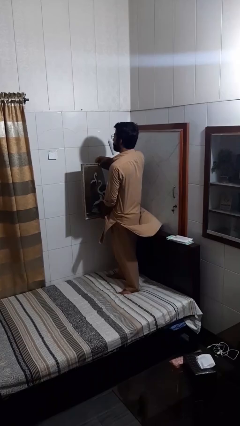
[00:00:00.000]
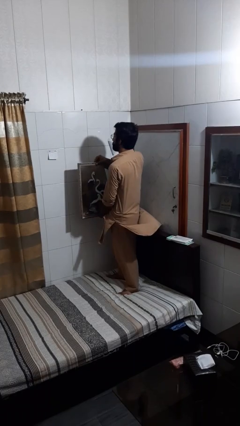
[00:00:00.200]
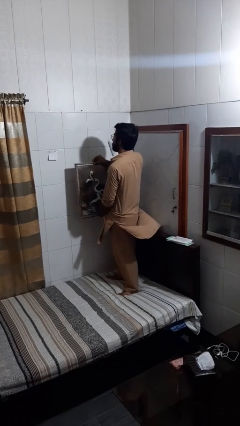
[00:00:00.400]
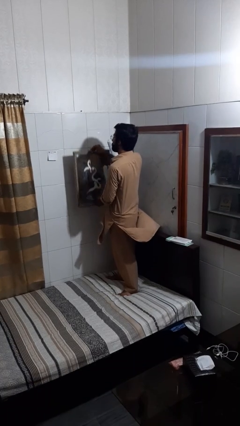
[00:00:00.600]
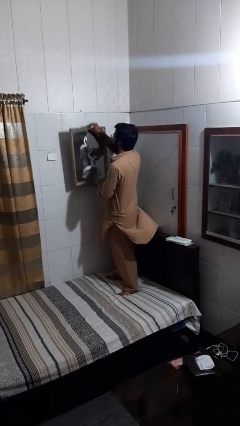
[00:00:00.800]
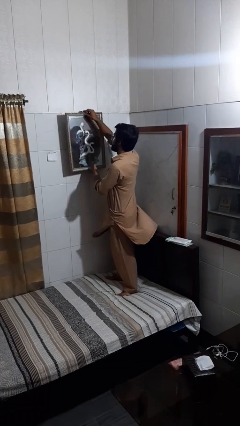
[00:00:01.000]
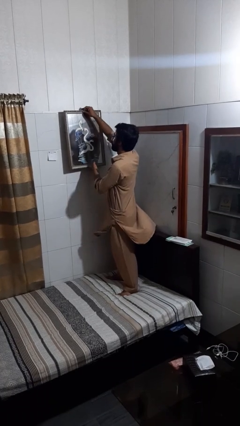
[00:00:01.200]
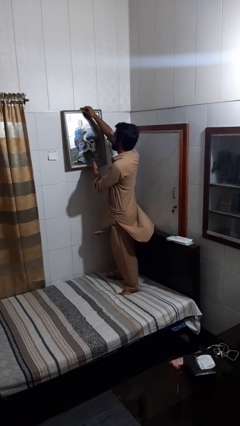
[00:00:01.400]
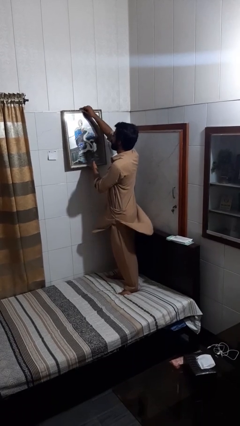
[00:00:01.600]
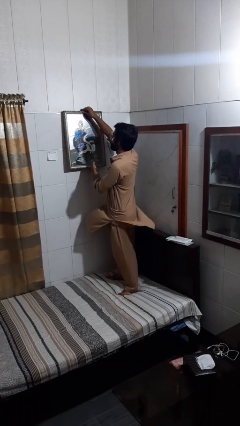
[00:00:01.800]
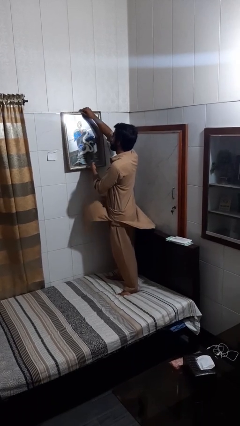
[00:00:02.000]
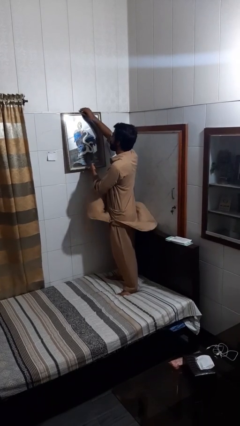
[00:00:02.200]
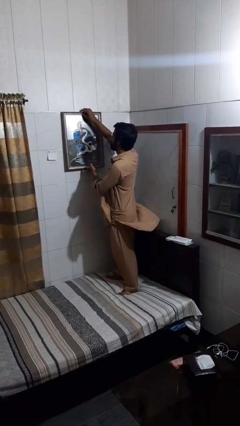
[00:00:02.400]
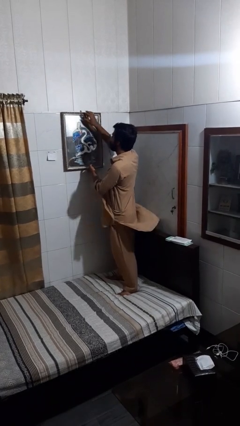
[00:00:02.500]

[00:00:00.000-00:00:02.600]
person puts up picture frame

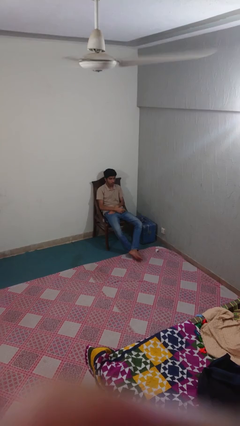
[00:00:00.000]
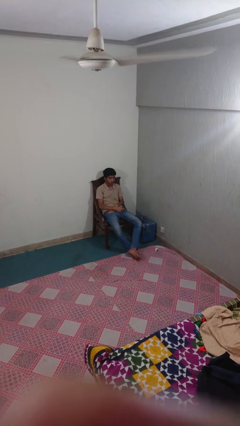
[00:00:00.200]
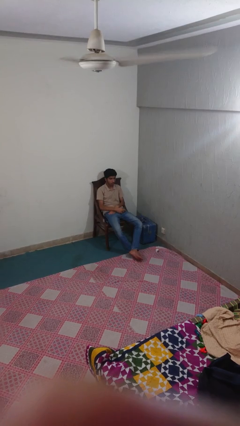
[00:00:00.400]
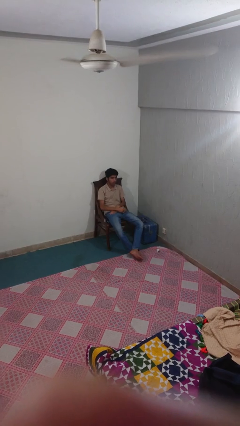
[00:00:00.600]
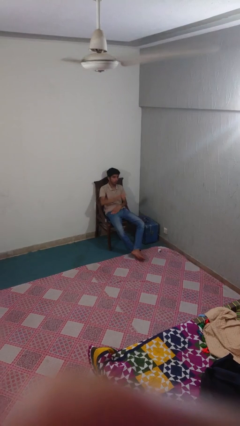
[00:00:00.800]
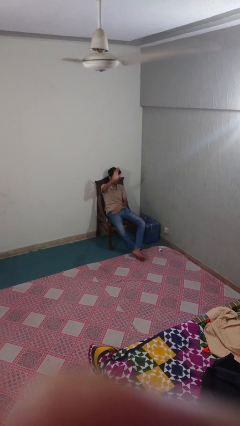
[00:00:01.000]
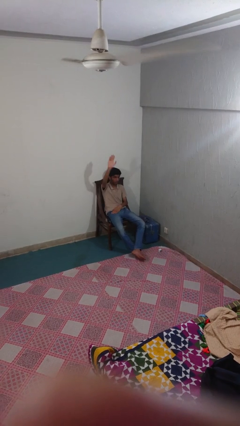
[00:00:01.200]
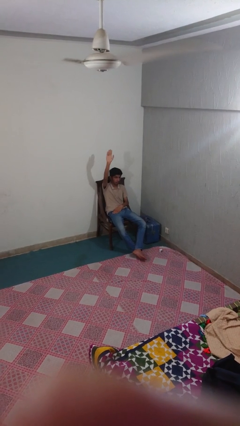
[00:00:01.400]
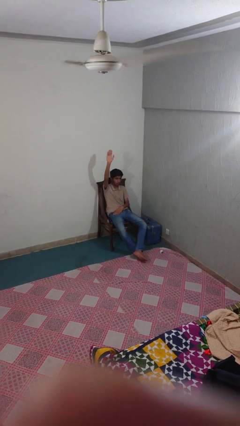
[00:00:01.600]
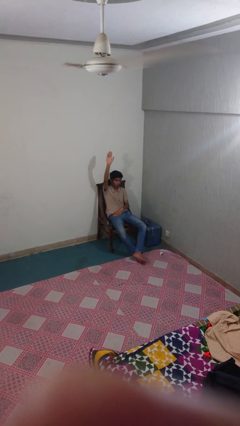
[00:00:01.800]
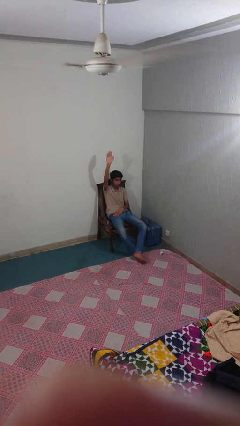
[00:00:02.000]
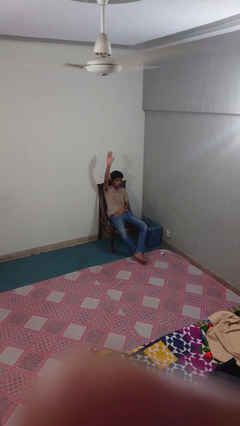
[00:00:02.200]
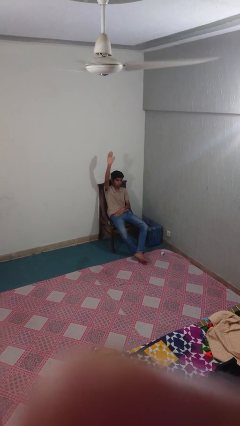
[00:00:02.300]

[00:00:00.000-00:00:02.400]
person gestures raise hand

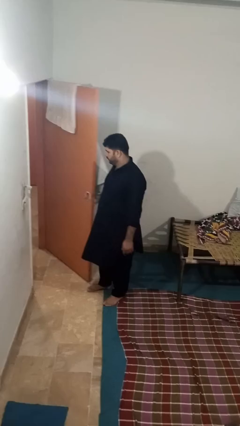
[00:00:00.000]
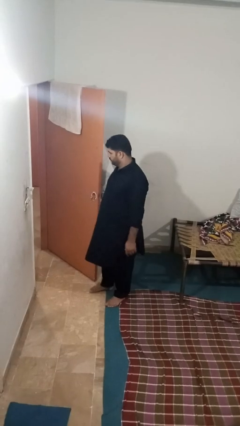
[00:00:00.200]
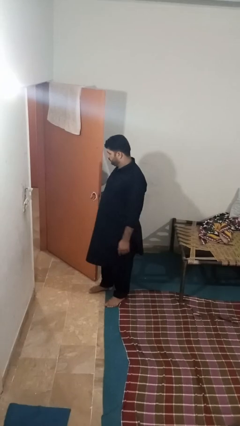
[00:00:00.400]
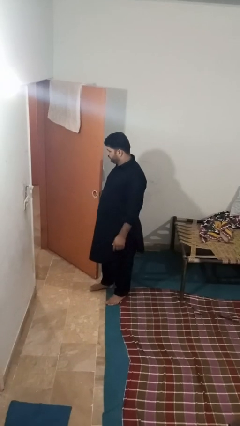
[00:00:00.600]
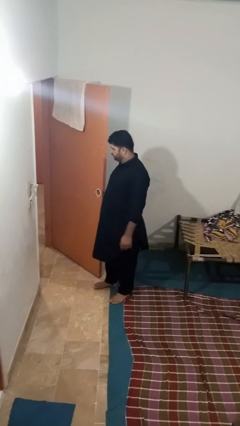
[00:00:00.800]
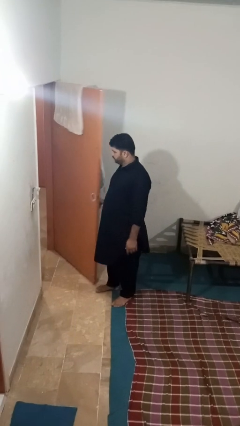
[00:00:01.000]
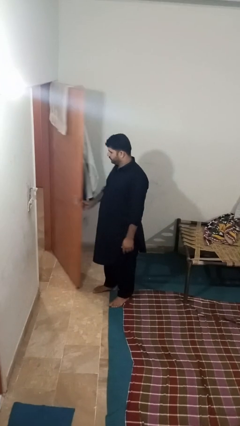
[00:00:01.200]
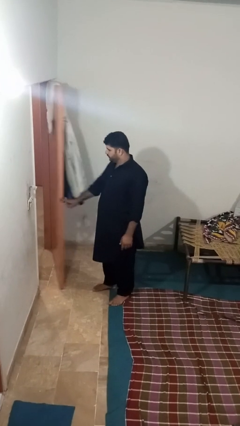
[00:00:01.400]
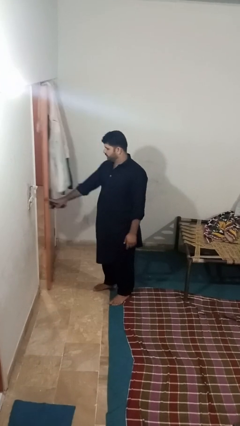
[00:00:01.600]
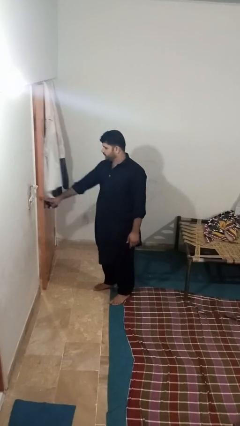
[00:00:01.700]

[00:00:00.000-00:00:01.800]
person closes gate

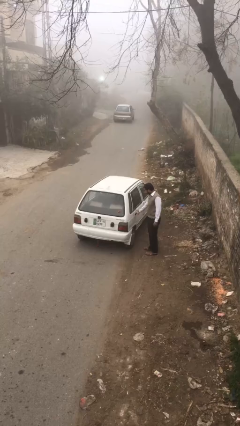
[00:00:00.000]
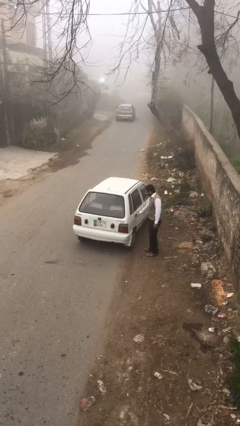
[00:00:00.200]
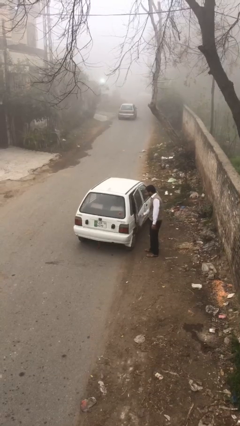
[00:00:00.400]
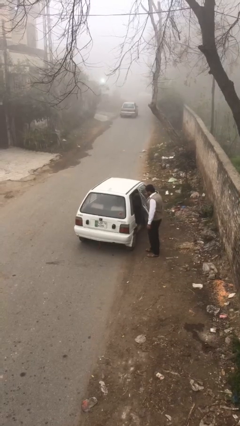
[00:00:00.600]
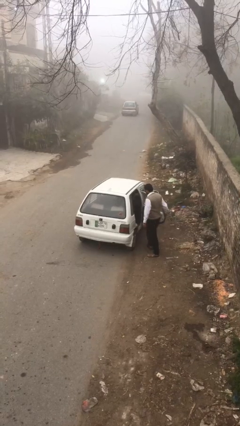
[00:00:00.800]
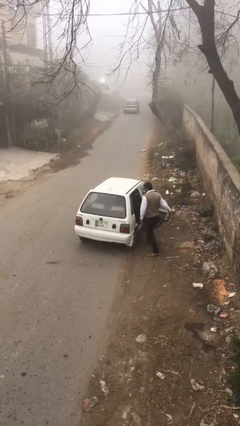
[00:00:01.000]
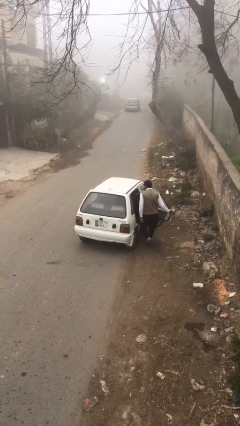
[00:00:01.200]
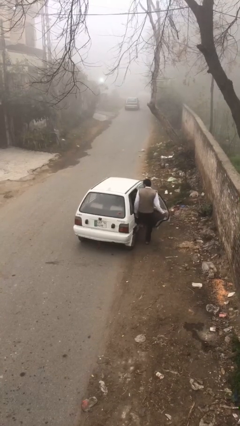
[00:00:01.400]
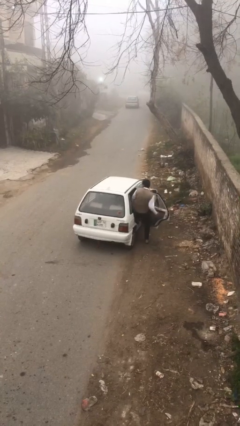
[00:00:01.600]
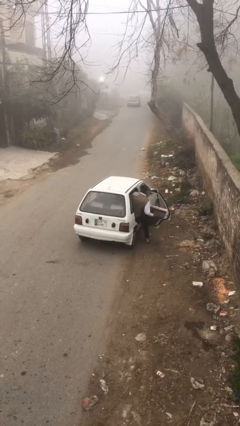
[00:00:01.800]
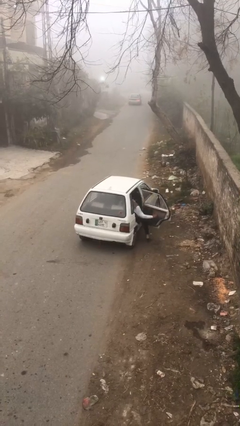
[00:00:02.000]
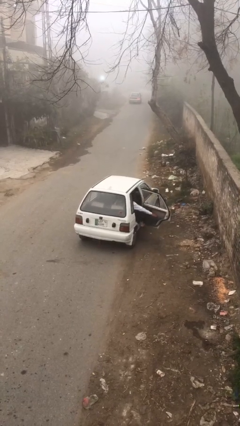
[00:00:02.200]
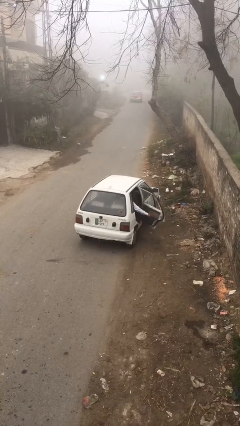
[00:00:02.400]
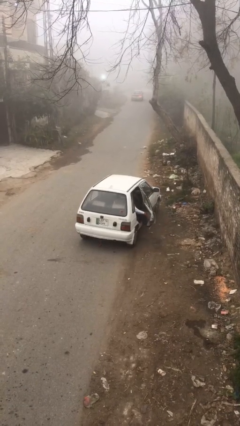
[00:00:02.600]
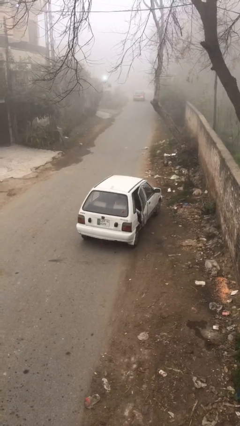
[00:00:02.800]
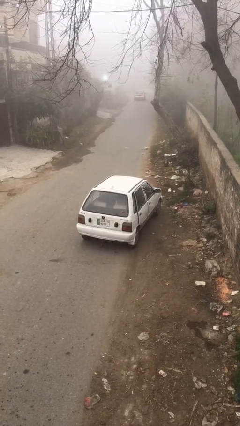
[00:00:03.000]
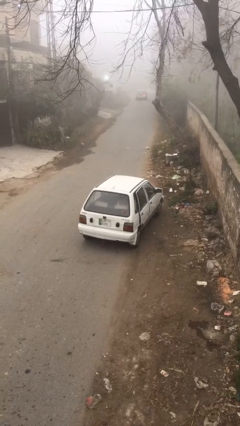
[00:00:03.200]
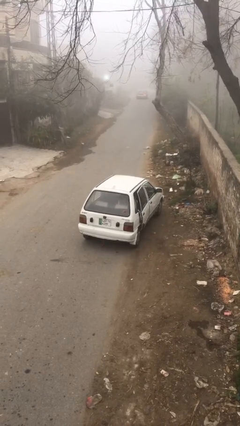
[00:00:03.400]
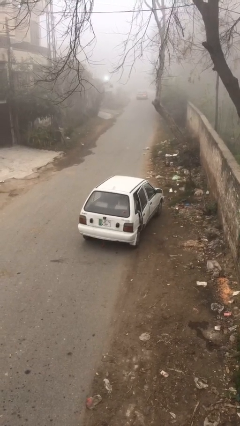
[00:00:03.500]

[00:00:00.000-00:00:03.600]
car picks up person

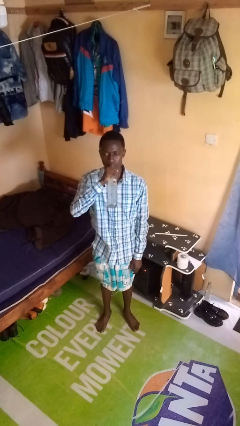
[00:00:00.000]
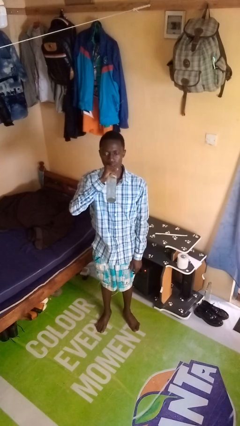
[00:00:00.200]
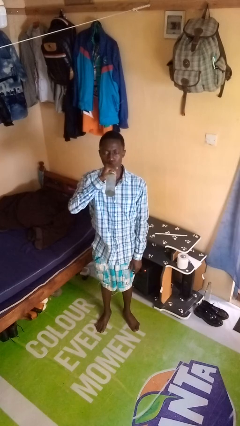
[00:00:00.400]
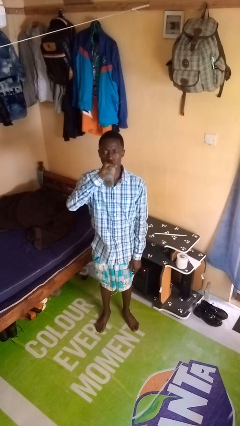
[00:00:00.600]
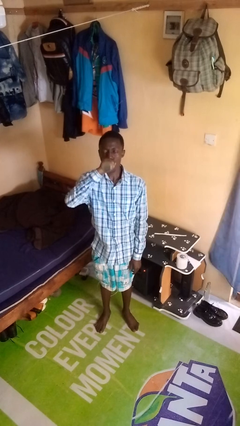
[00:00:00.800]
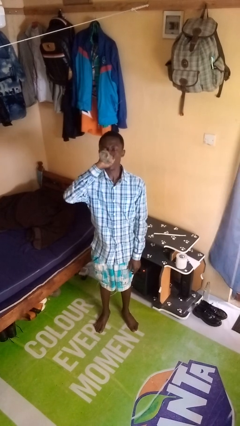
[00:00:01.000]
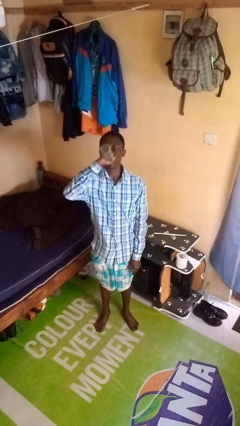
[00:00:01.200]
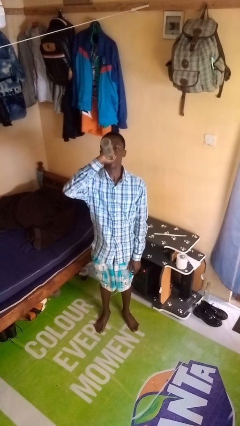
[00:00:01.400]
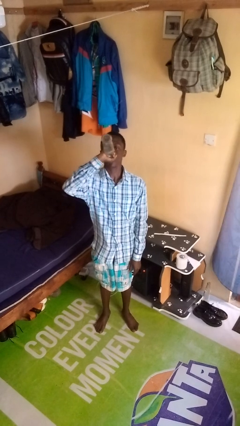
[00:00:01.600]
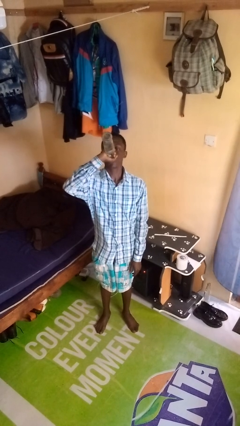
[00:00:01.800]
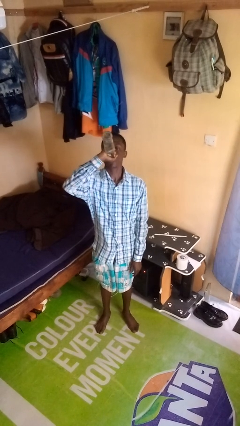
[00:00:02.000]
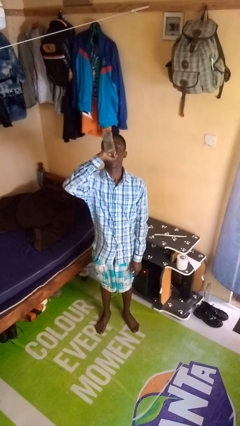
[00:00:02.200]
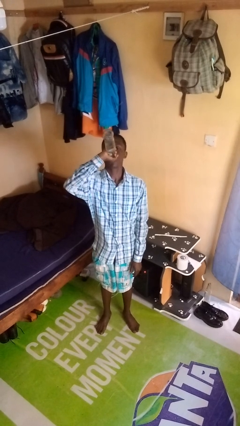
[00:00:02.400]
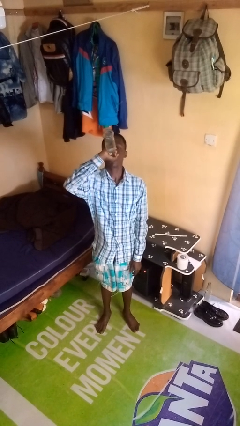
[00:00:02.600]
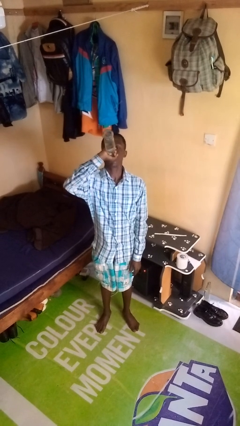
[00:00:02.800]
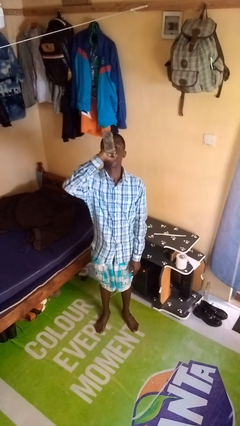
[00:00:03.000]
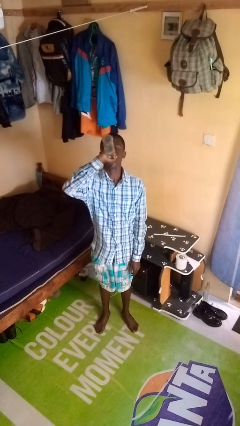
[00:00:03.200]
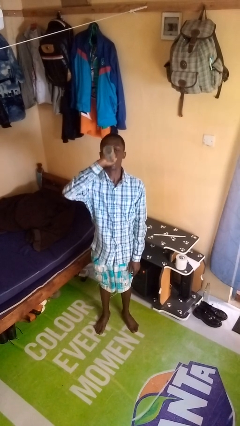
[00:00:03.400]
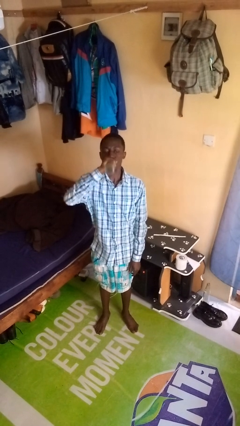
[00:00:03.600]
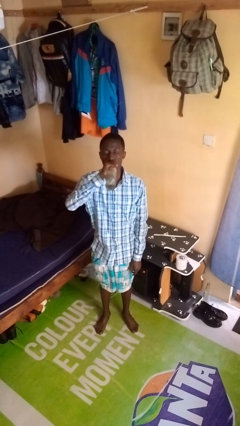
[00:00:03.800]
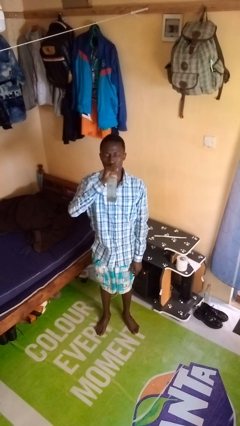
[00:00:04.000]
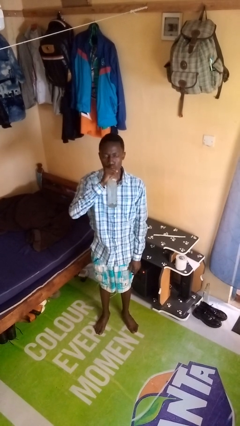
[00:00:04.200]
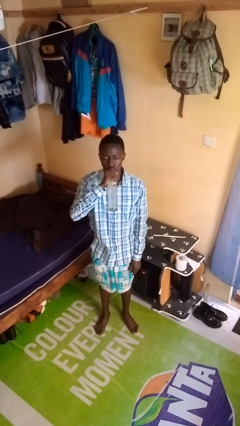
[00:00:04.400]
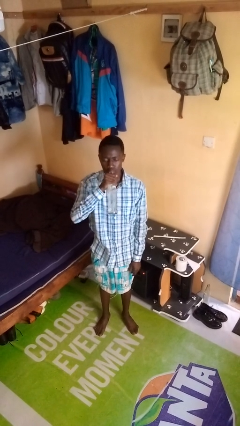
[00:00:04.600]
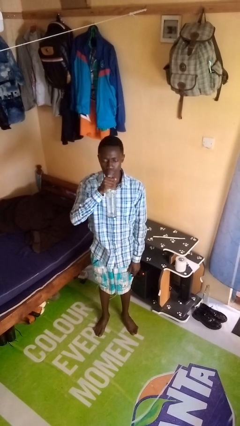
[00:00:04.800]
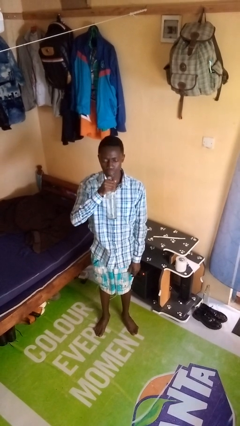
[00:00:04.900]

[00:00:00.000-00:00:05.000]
person drinks from bottle

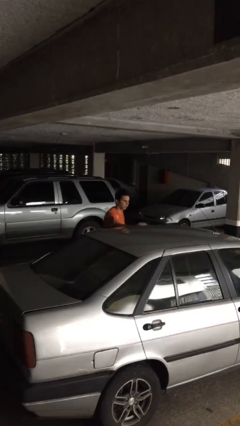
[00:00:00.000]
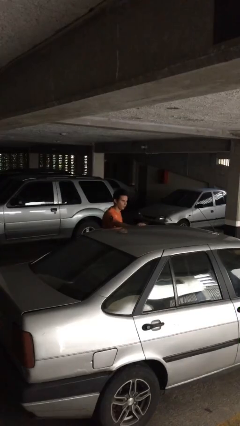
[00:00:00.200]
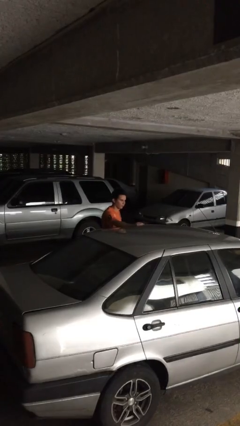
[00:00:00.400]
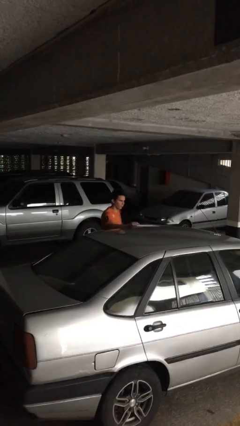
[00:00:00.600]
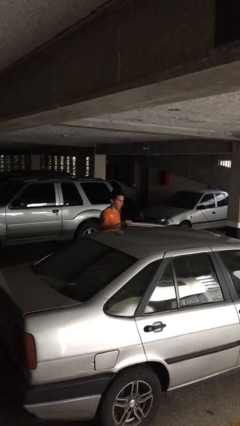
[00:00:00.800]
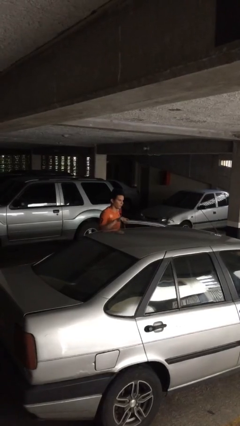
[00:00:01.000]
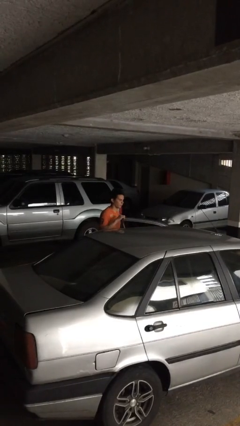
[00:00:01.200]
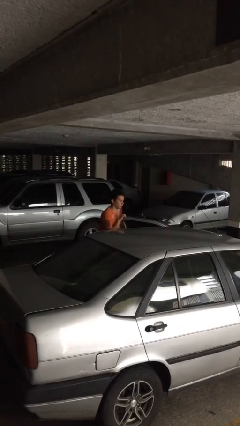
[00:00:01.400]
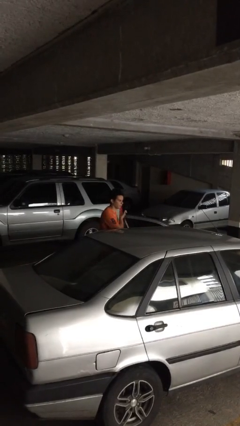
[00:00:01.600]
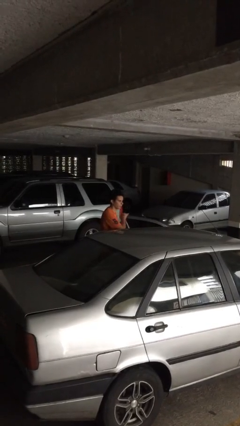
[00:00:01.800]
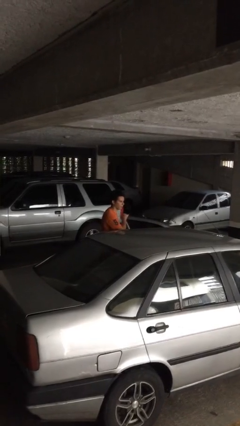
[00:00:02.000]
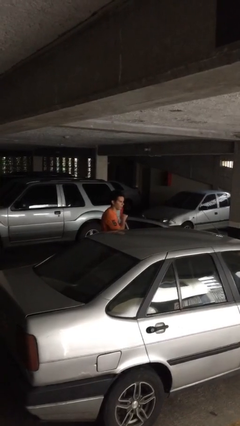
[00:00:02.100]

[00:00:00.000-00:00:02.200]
person opens car door
